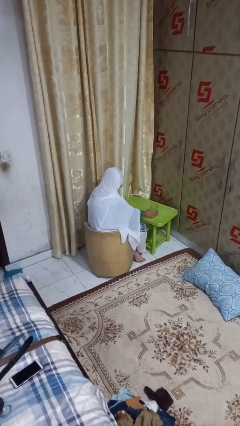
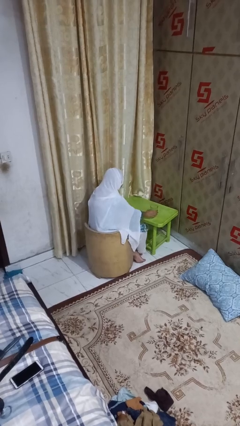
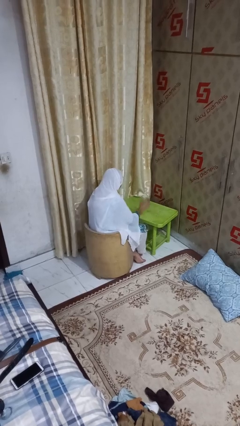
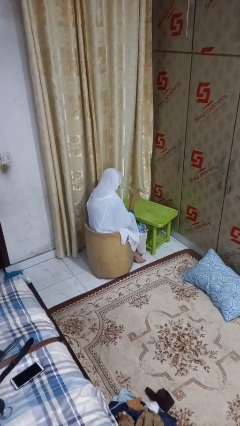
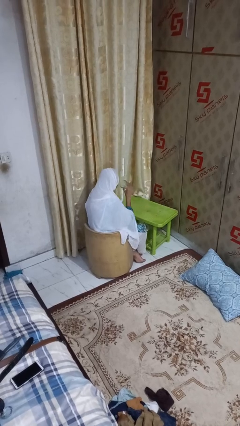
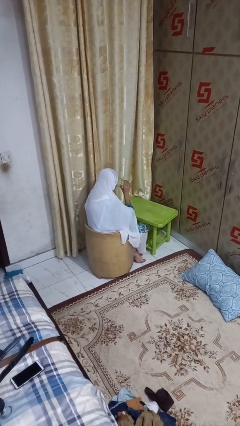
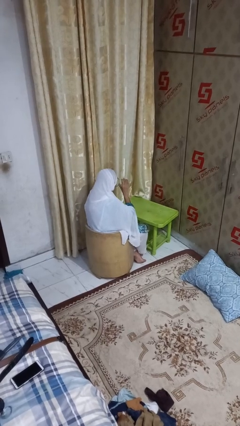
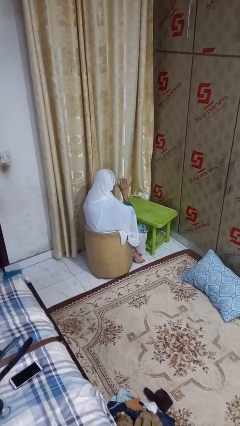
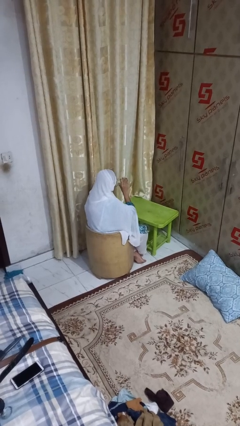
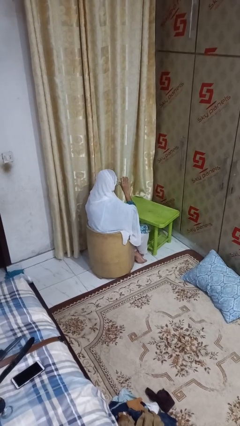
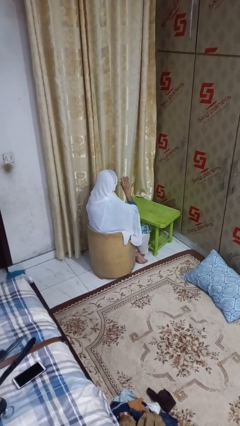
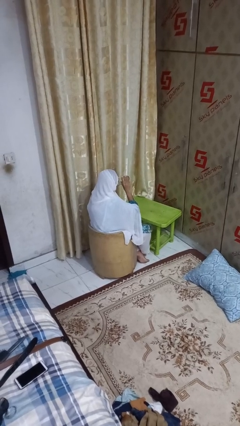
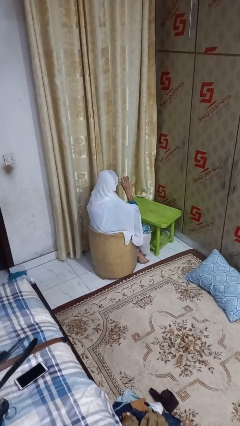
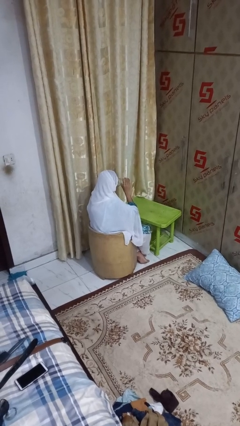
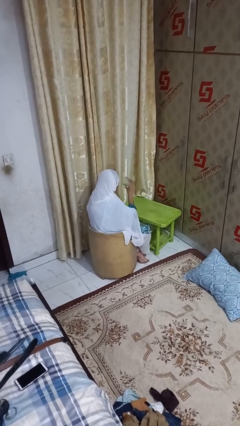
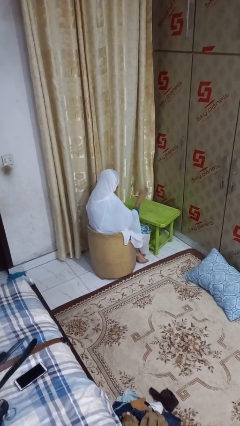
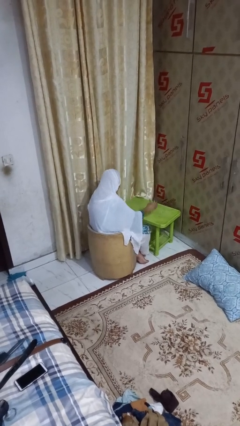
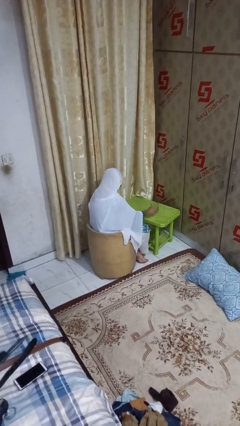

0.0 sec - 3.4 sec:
person drinks from cup

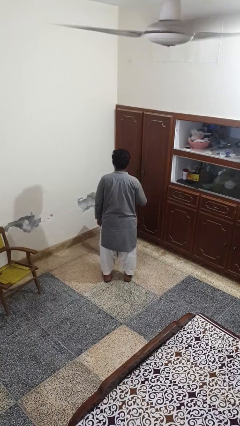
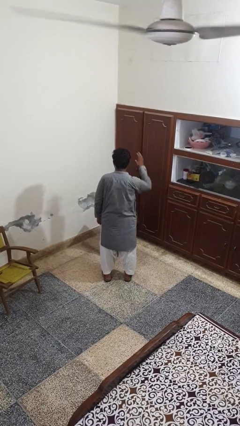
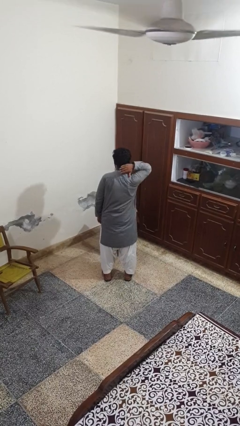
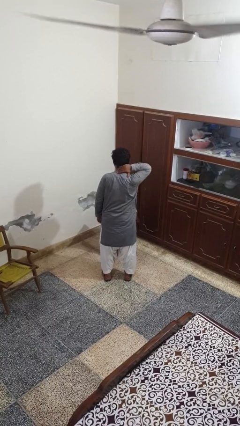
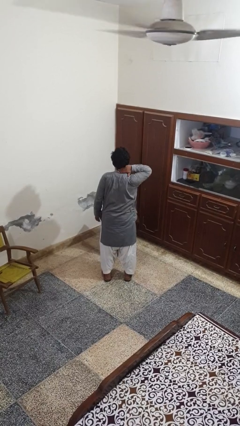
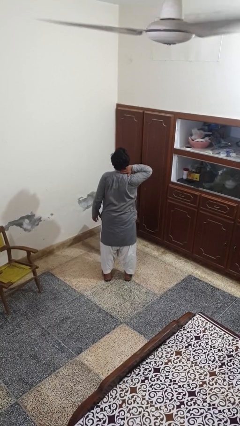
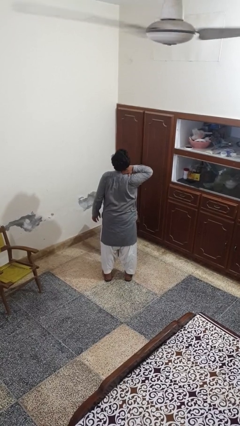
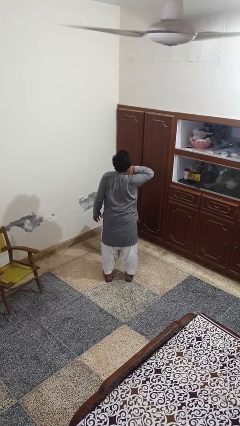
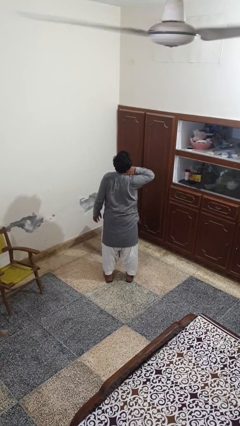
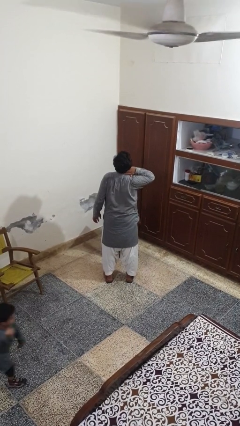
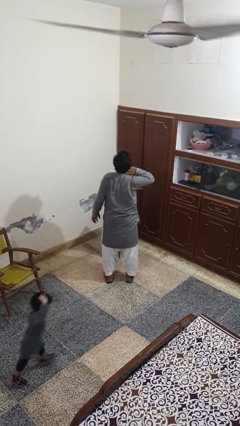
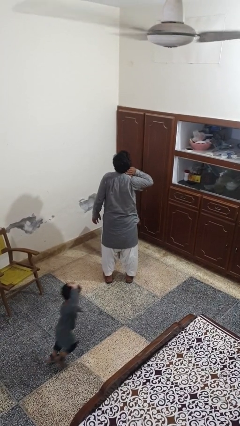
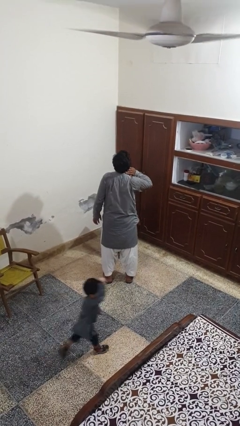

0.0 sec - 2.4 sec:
person rubs neck

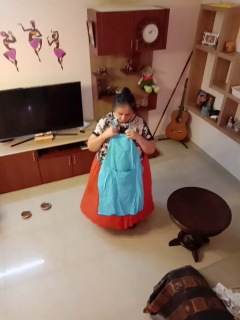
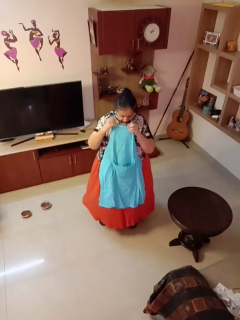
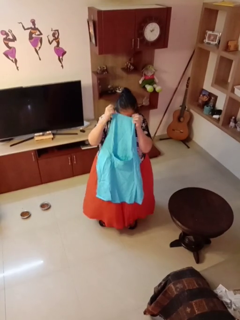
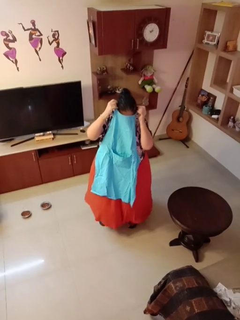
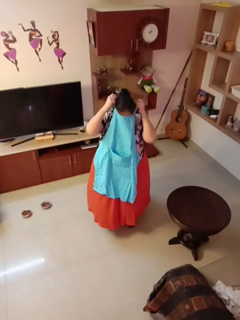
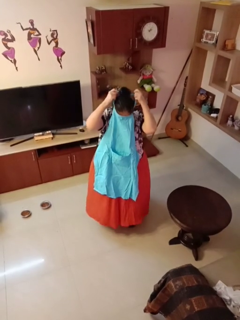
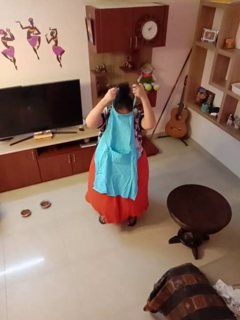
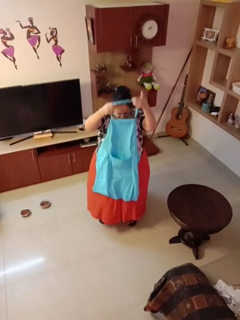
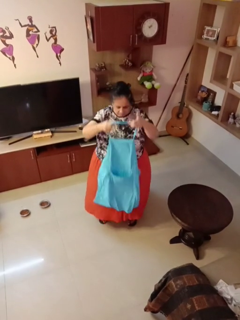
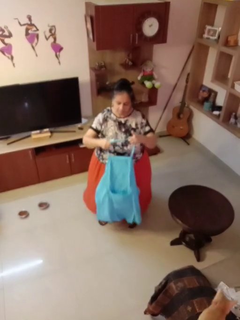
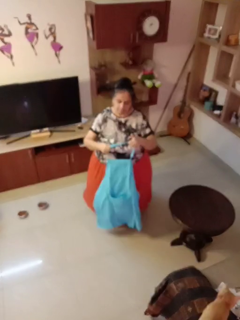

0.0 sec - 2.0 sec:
person takes off apron

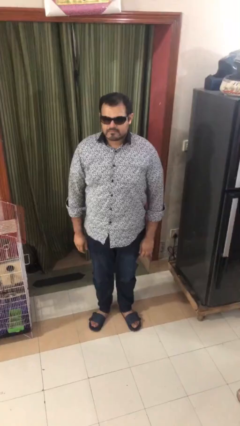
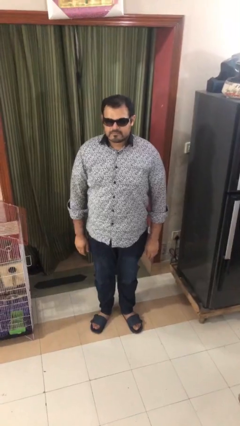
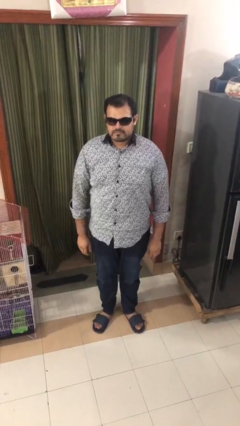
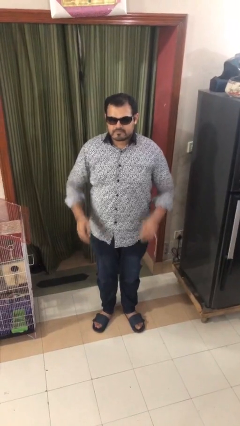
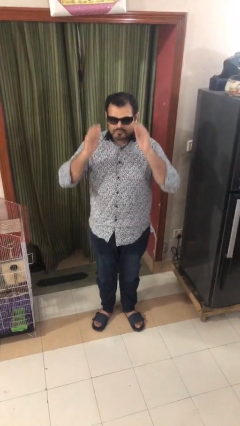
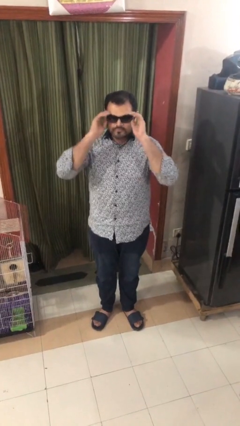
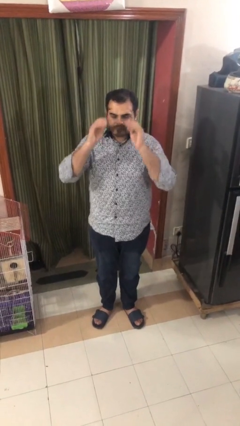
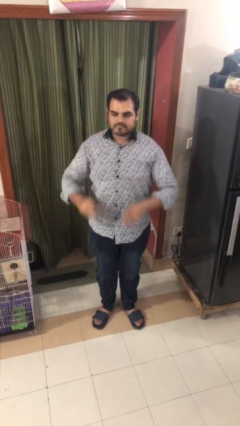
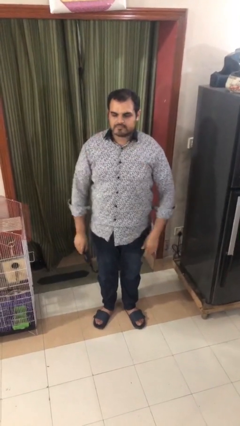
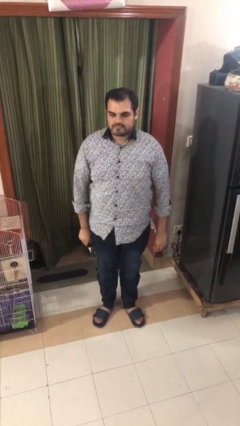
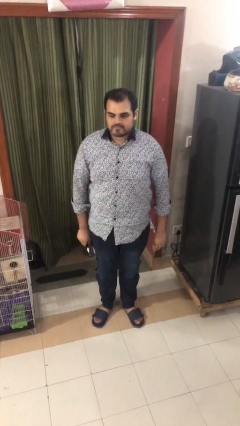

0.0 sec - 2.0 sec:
person takes off sunglasses

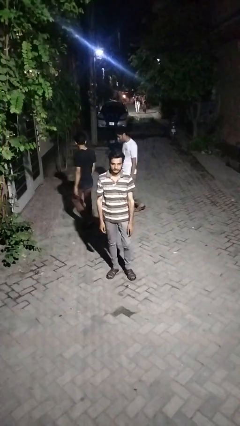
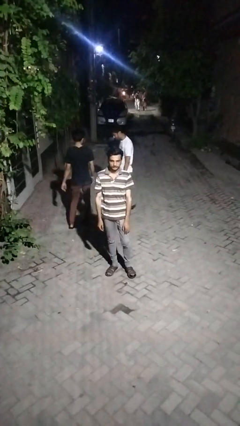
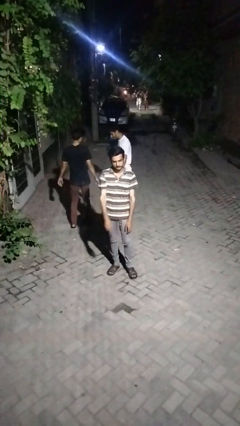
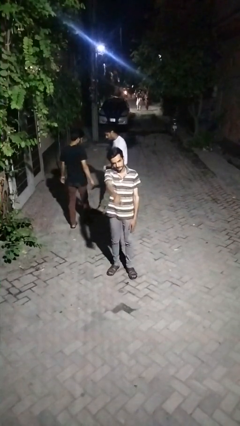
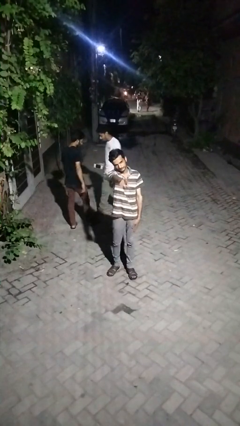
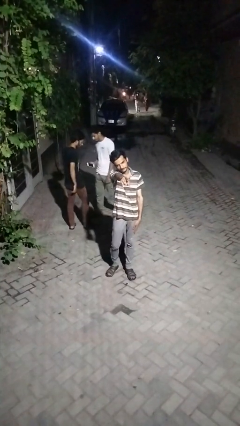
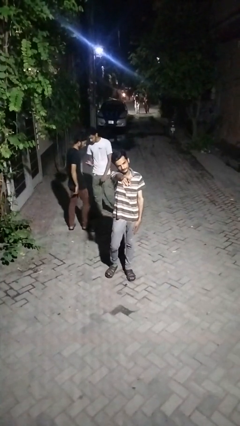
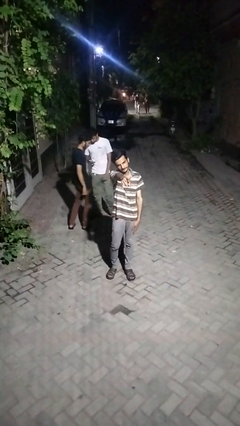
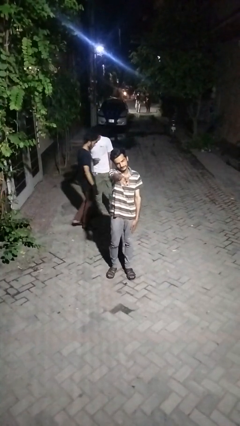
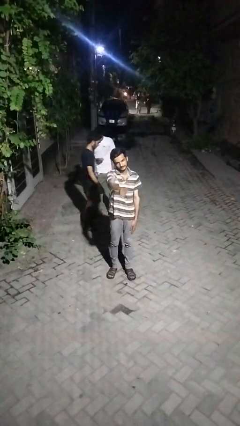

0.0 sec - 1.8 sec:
person points at person

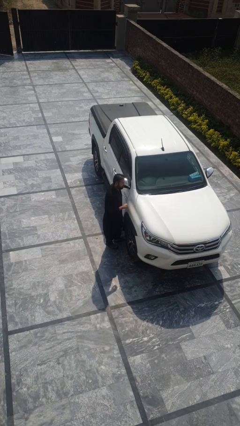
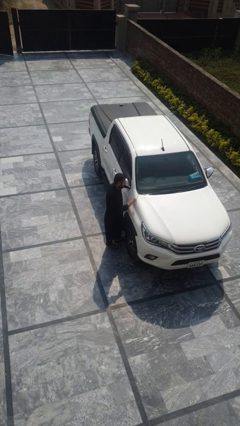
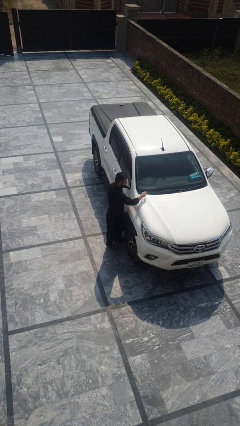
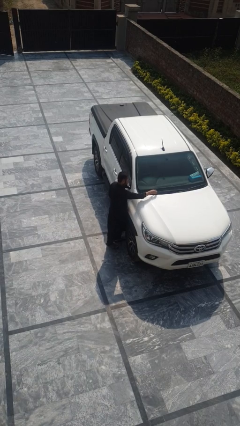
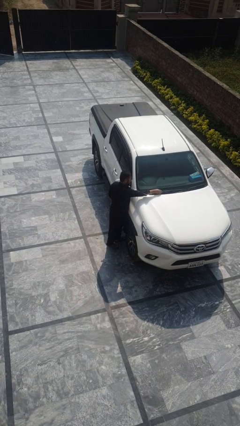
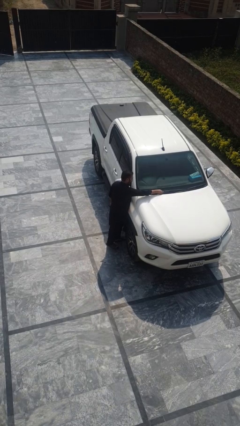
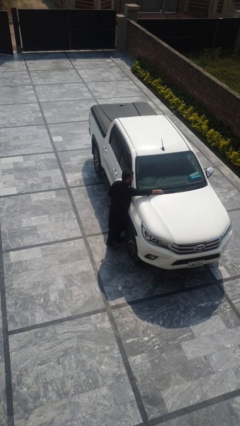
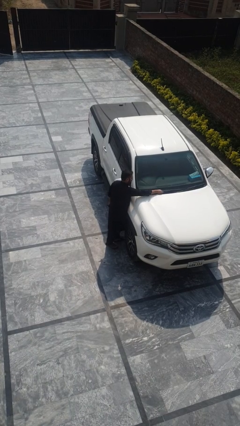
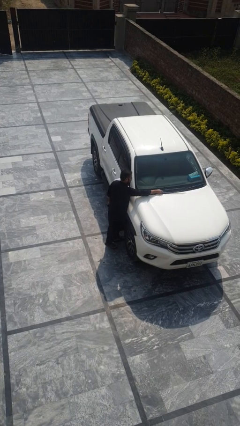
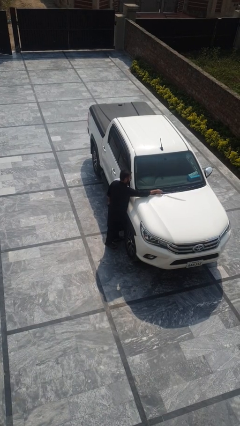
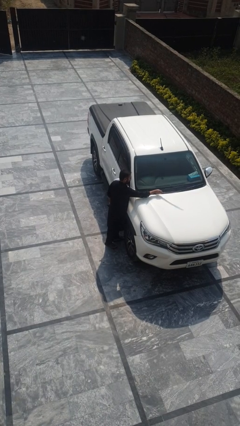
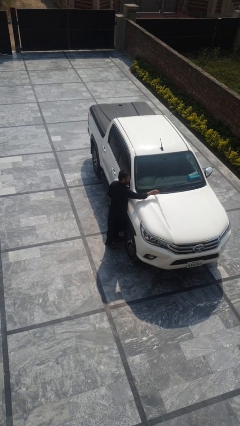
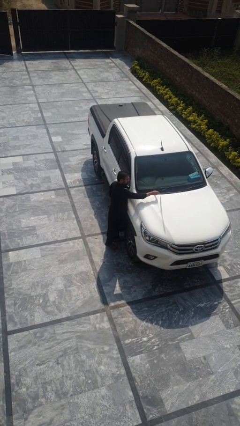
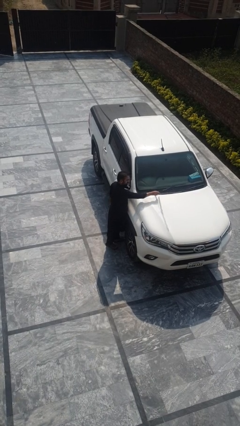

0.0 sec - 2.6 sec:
person flips up car wipers

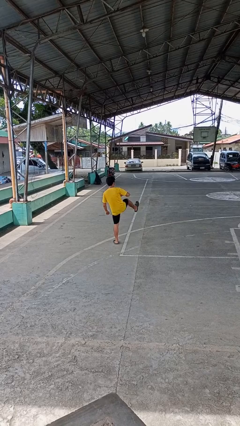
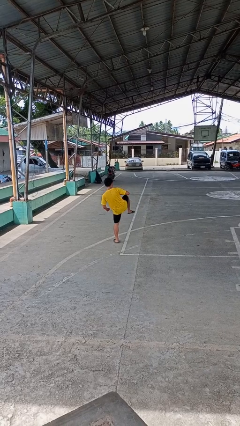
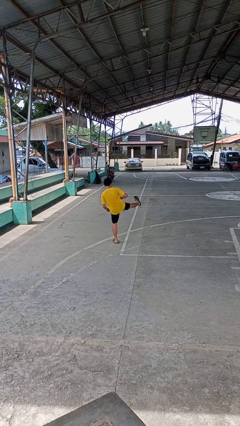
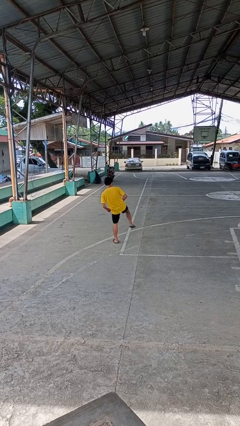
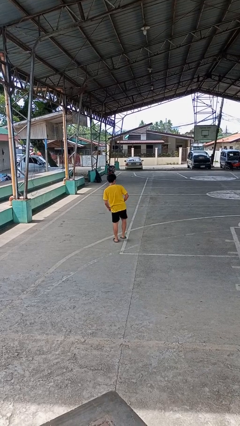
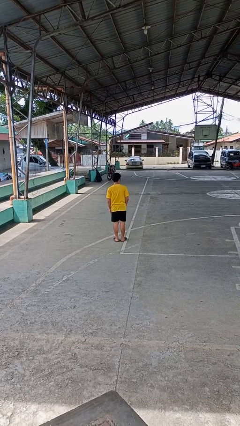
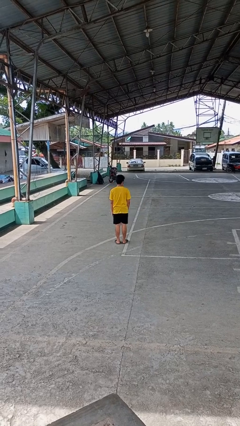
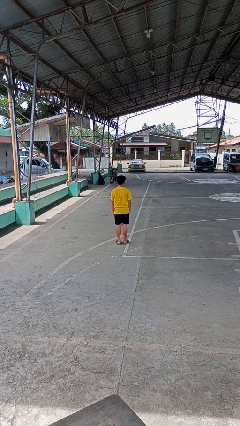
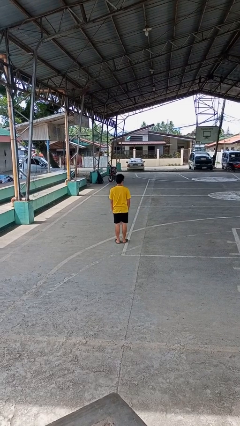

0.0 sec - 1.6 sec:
person karate kicks

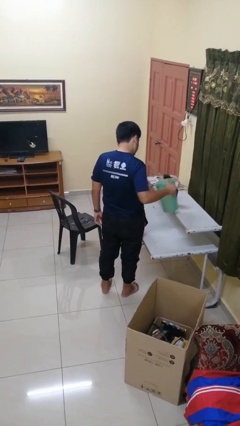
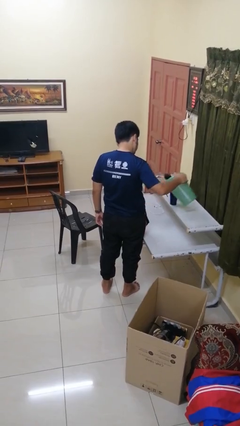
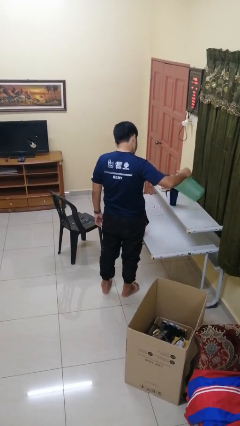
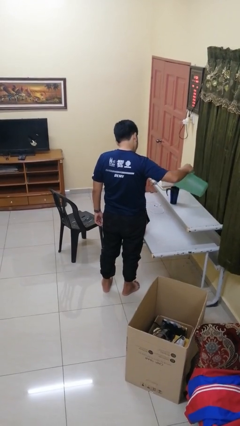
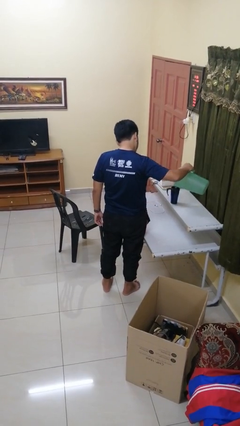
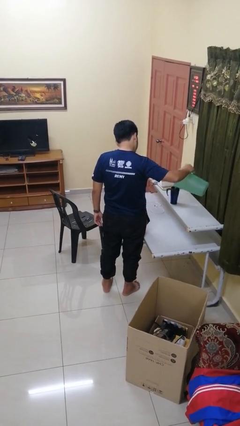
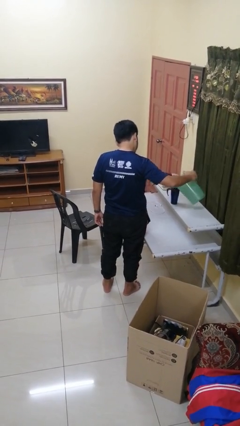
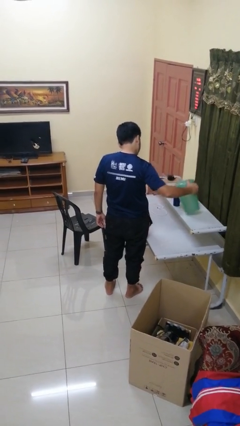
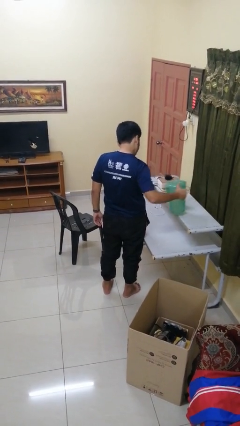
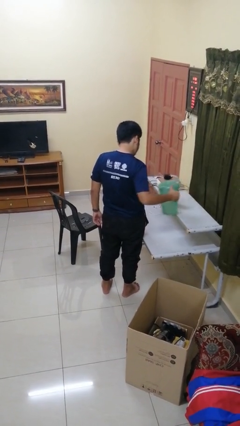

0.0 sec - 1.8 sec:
person pours coffee into mug
